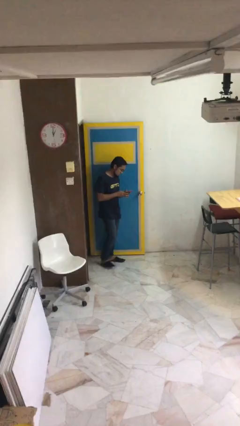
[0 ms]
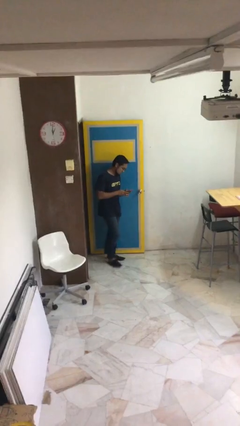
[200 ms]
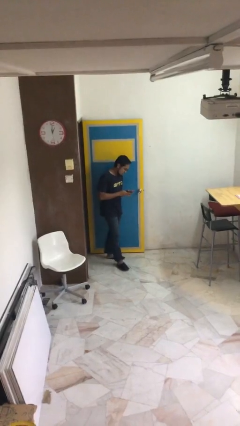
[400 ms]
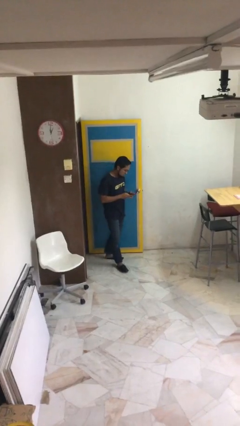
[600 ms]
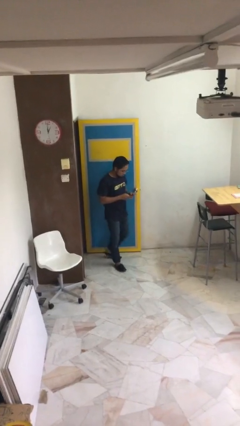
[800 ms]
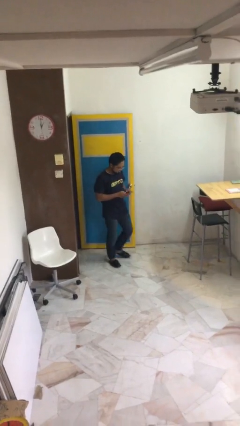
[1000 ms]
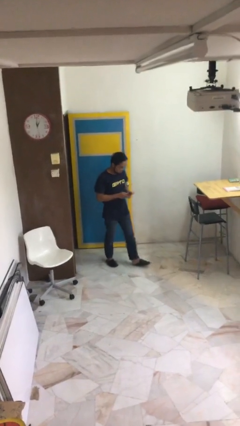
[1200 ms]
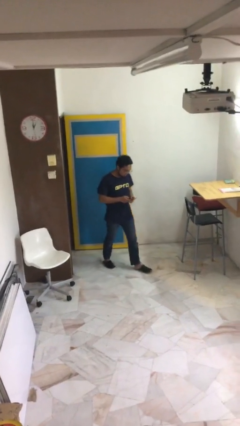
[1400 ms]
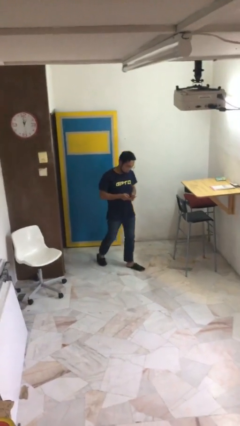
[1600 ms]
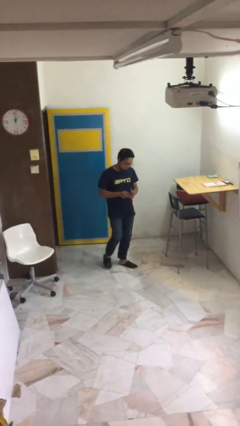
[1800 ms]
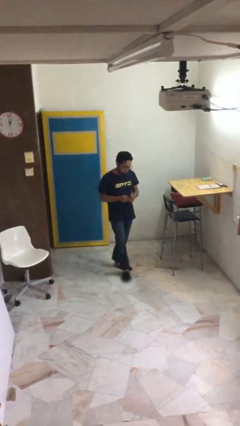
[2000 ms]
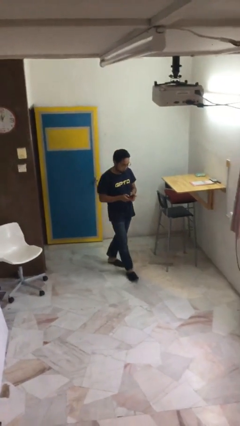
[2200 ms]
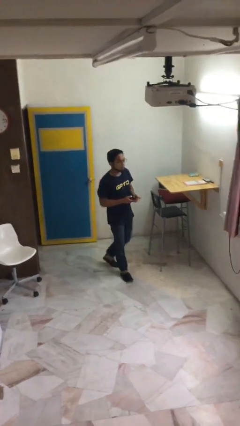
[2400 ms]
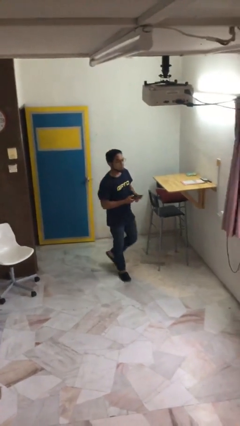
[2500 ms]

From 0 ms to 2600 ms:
person texts on phone

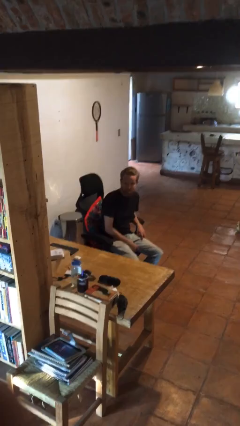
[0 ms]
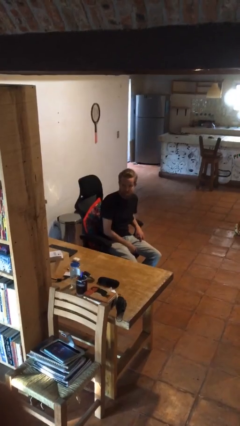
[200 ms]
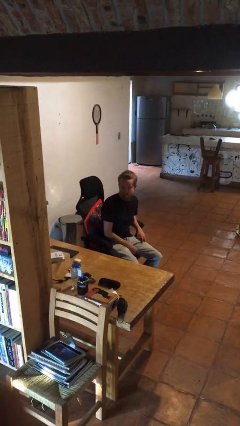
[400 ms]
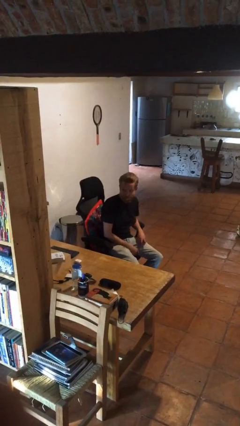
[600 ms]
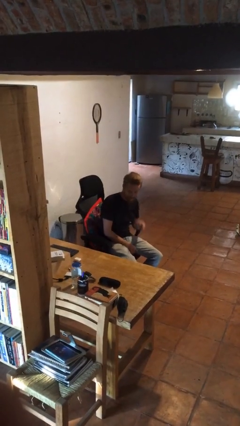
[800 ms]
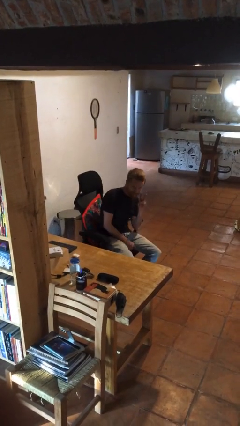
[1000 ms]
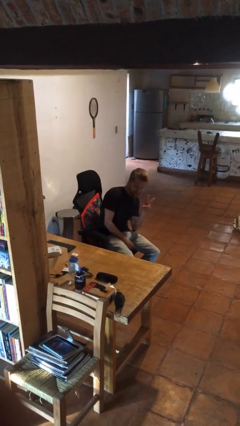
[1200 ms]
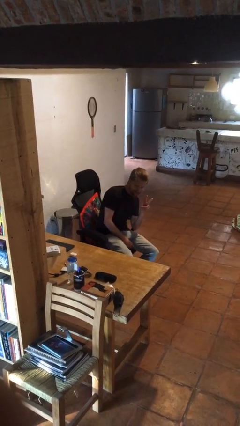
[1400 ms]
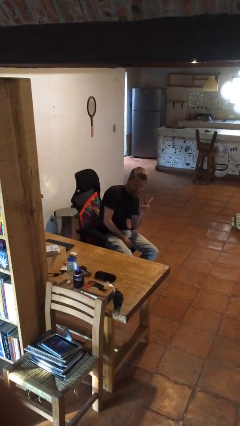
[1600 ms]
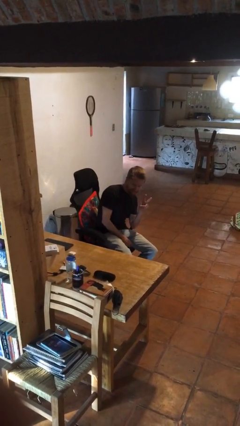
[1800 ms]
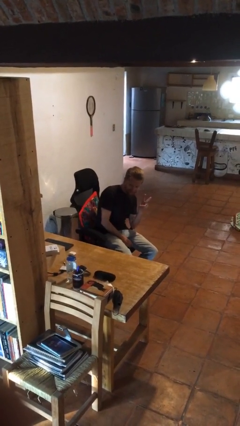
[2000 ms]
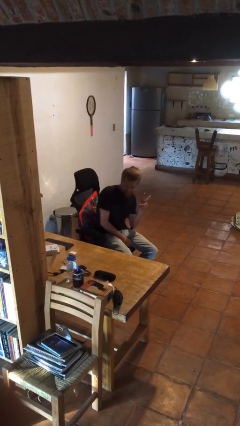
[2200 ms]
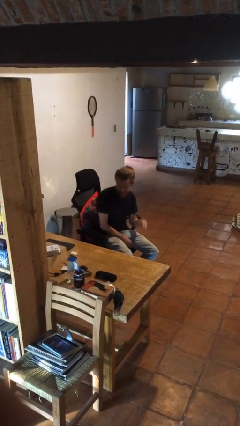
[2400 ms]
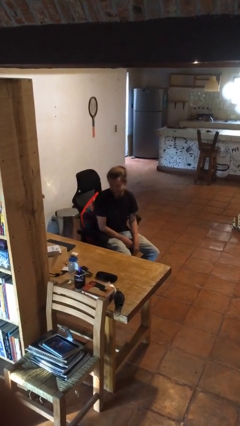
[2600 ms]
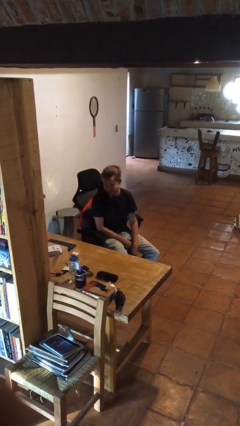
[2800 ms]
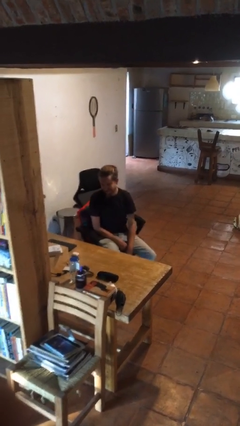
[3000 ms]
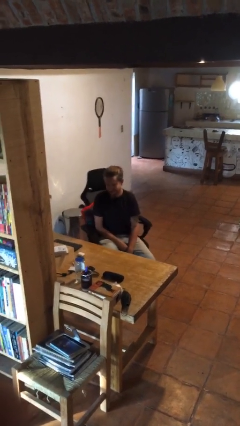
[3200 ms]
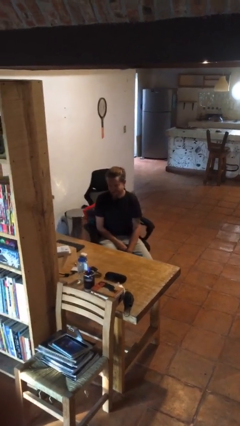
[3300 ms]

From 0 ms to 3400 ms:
person gestures peace

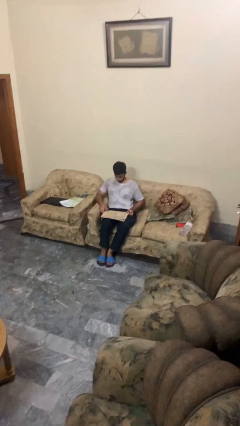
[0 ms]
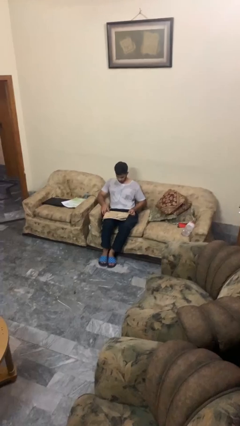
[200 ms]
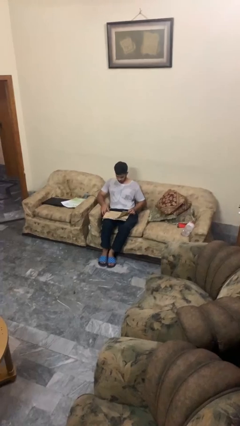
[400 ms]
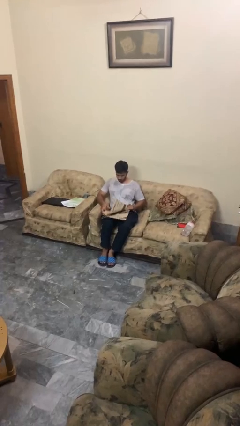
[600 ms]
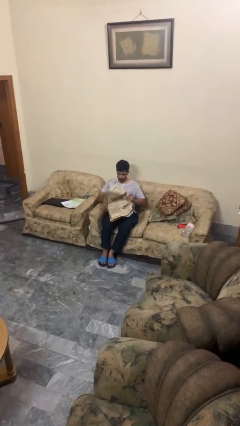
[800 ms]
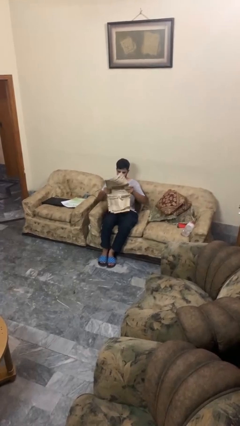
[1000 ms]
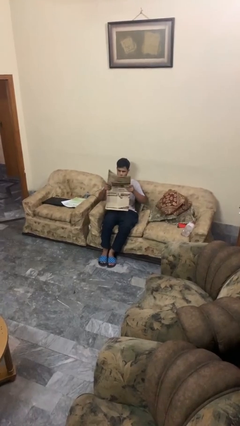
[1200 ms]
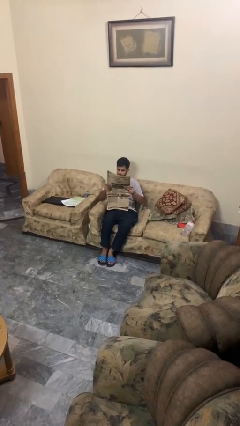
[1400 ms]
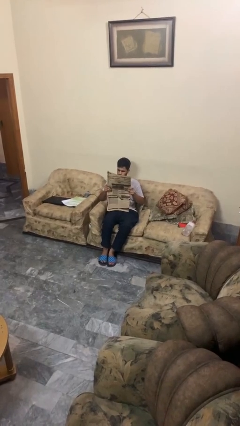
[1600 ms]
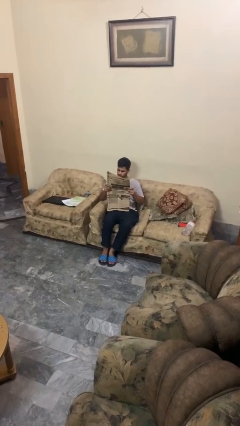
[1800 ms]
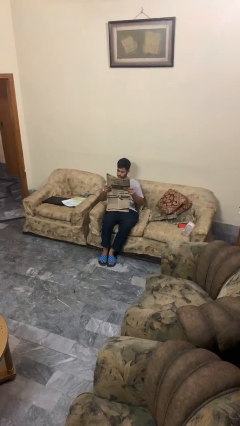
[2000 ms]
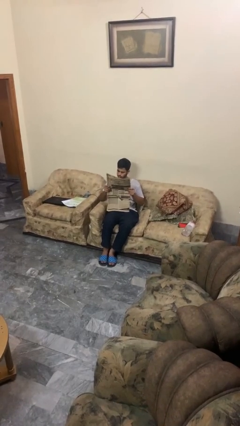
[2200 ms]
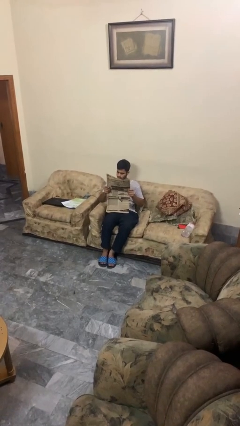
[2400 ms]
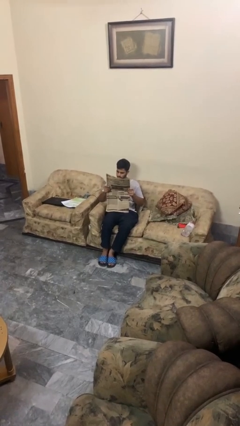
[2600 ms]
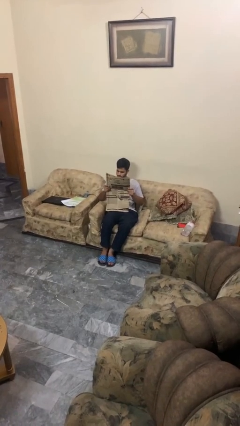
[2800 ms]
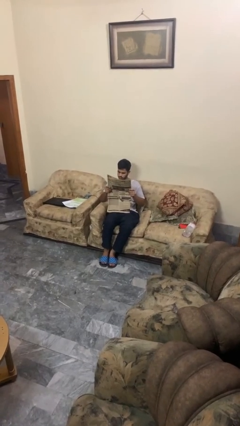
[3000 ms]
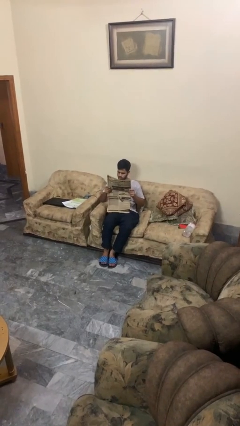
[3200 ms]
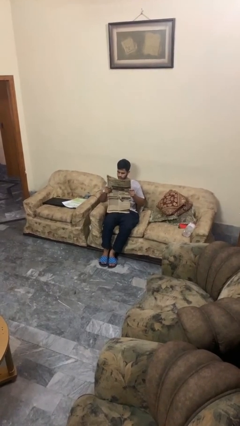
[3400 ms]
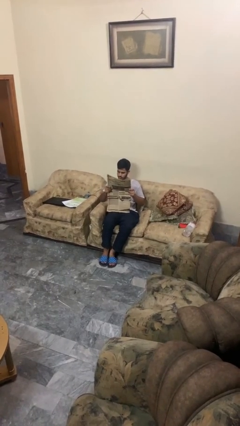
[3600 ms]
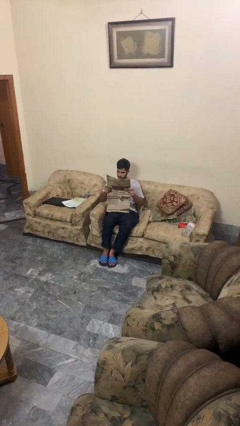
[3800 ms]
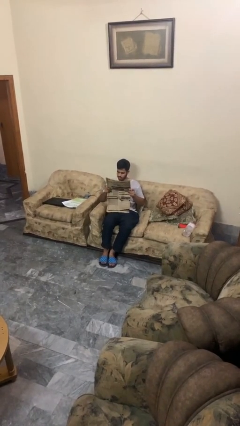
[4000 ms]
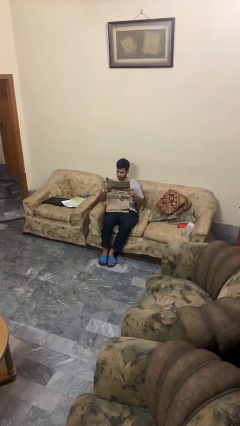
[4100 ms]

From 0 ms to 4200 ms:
person reads newspaper

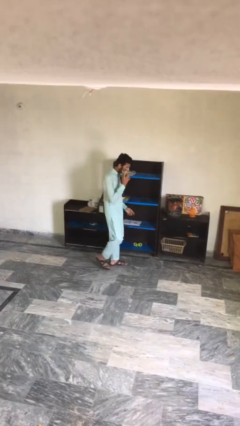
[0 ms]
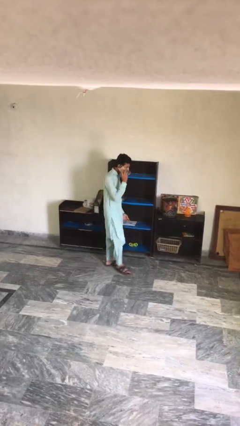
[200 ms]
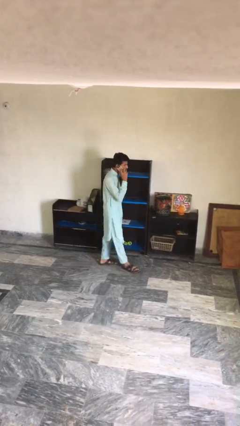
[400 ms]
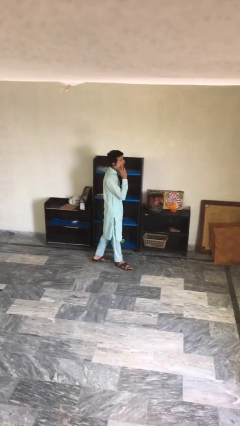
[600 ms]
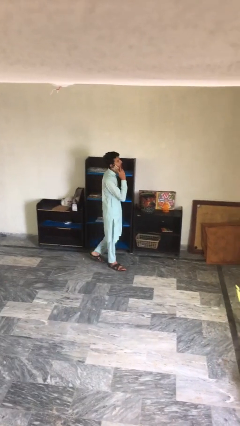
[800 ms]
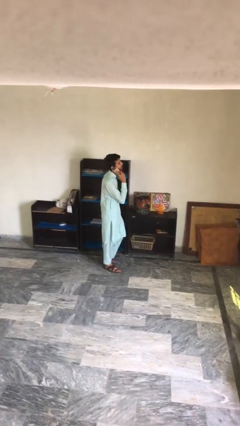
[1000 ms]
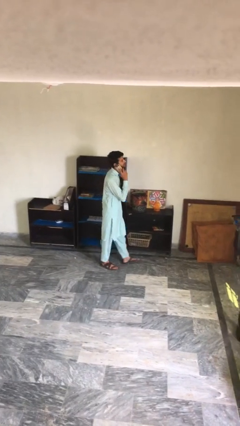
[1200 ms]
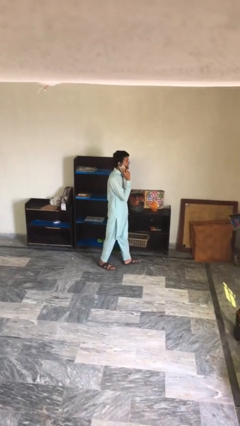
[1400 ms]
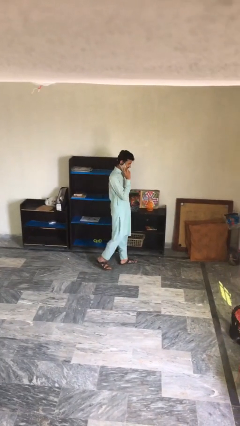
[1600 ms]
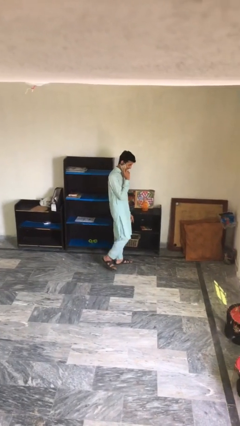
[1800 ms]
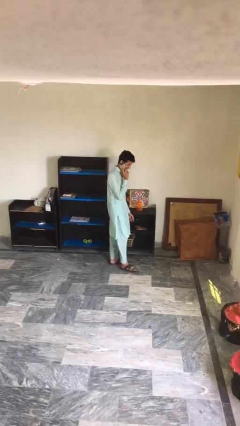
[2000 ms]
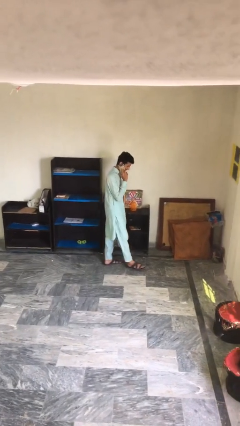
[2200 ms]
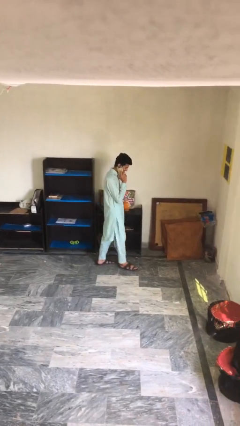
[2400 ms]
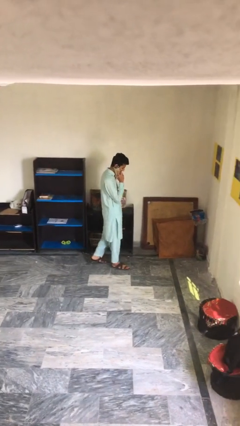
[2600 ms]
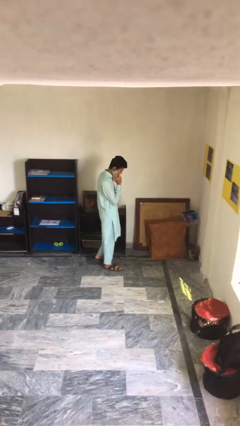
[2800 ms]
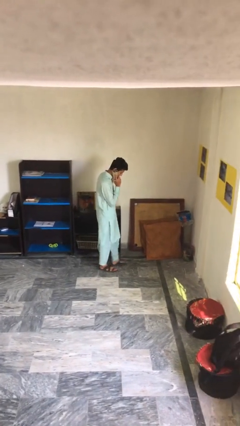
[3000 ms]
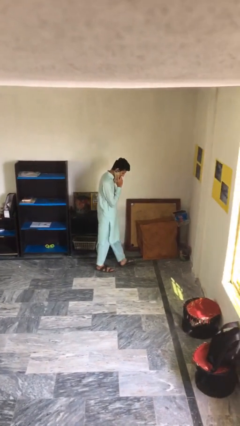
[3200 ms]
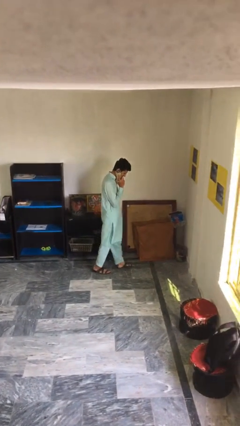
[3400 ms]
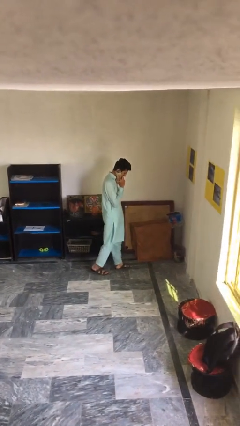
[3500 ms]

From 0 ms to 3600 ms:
person talks on phone

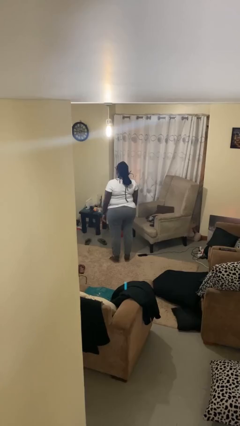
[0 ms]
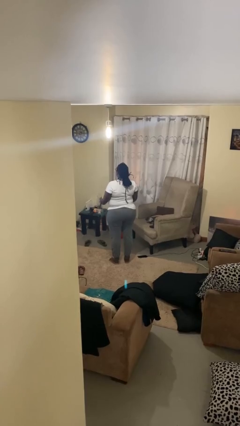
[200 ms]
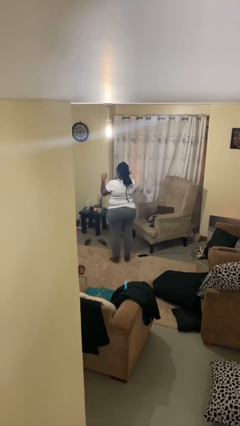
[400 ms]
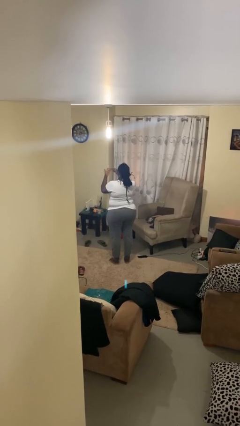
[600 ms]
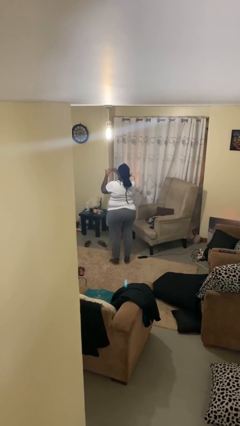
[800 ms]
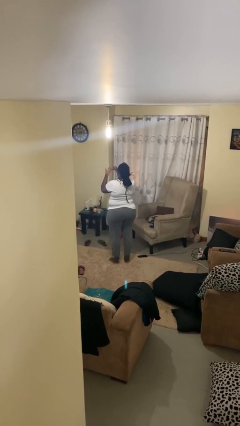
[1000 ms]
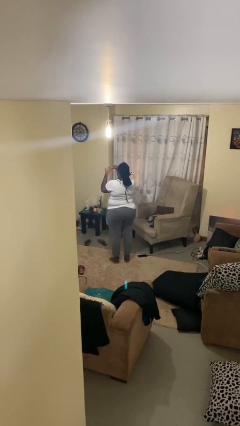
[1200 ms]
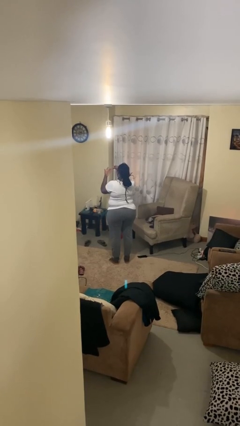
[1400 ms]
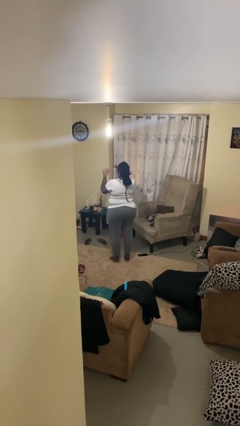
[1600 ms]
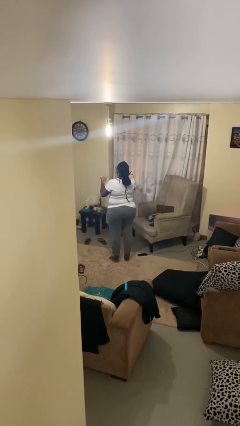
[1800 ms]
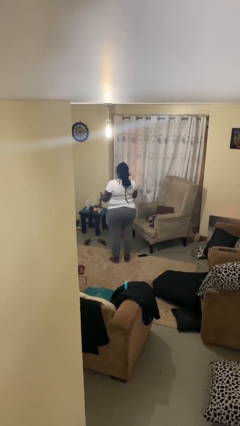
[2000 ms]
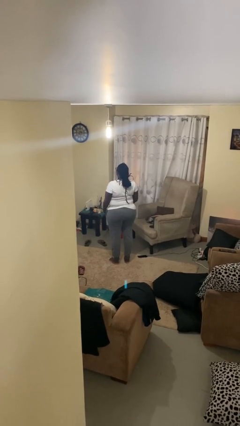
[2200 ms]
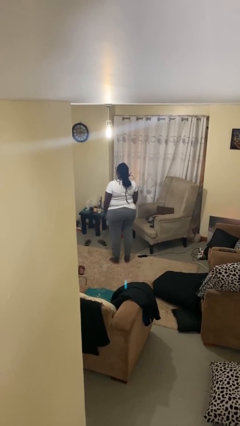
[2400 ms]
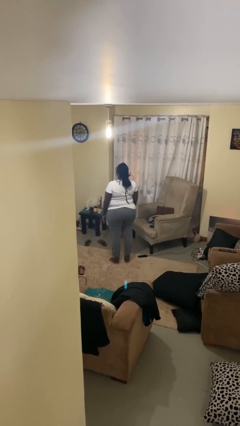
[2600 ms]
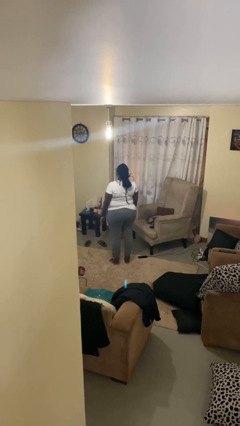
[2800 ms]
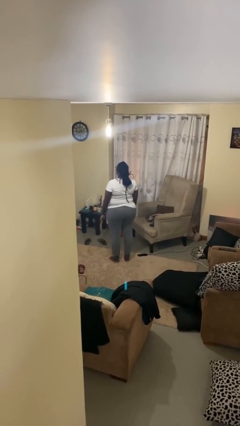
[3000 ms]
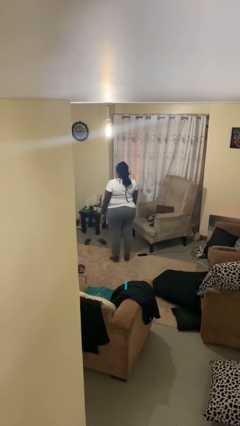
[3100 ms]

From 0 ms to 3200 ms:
person takes off ring

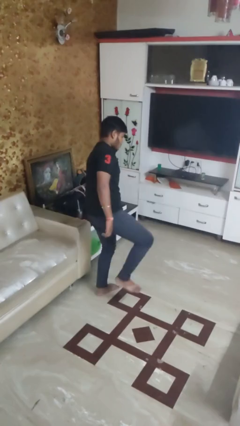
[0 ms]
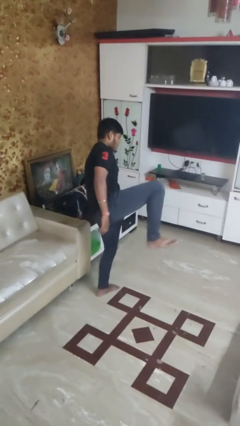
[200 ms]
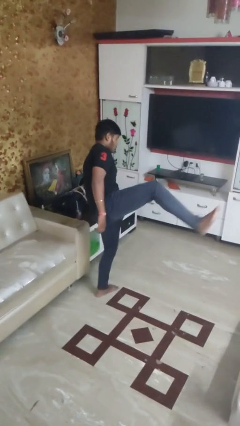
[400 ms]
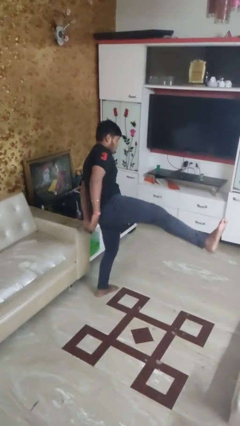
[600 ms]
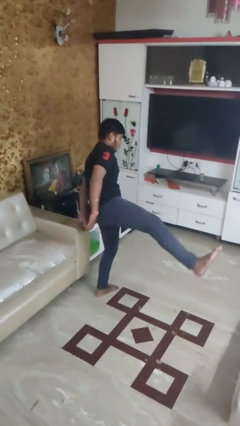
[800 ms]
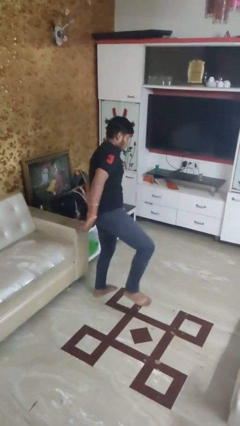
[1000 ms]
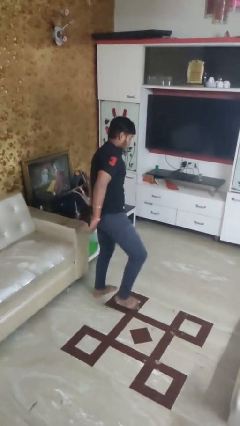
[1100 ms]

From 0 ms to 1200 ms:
person karate kicks
